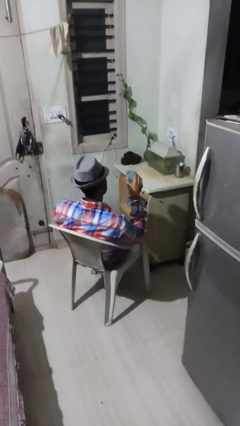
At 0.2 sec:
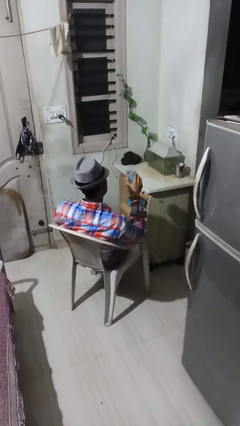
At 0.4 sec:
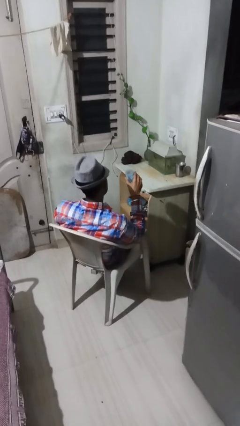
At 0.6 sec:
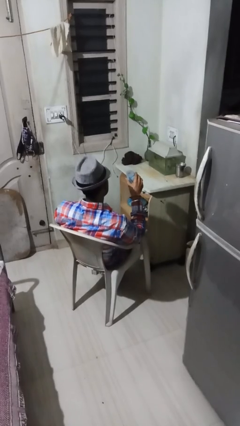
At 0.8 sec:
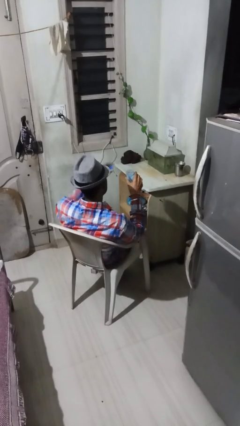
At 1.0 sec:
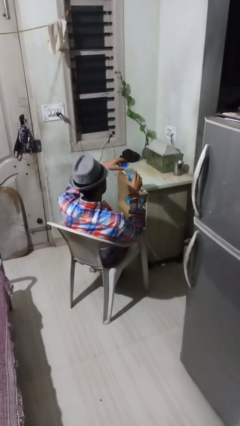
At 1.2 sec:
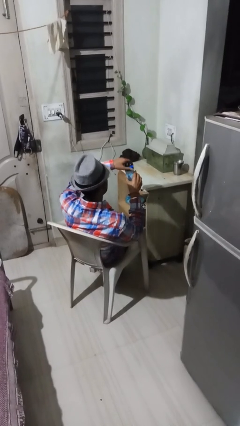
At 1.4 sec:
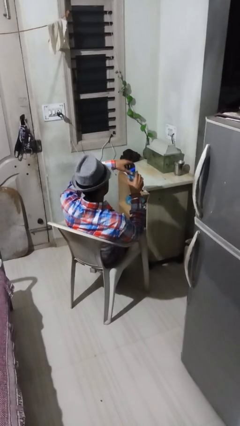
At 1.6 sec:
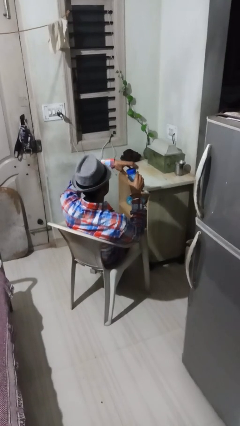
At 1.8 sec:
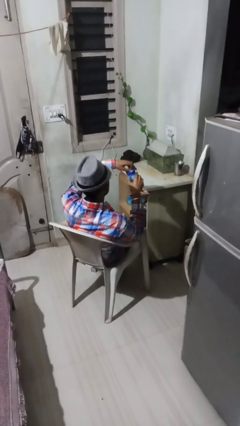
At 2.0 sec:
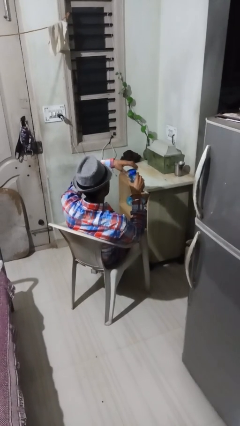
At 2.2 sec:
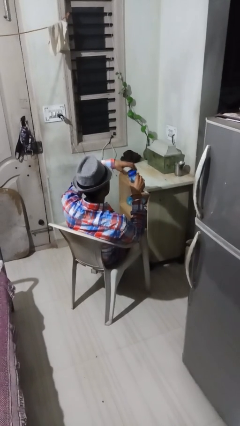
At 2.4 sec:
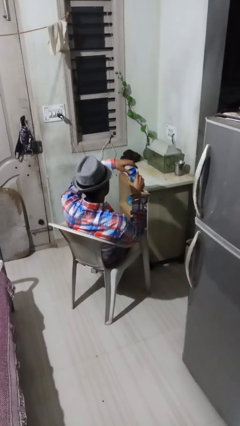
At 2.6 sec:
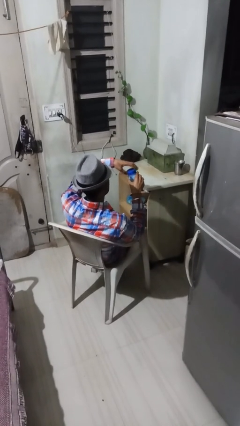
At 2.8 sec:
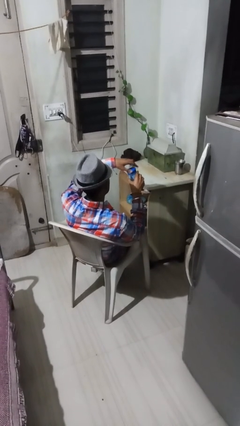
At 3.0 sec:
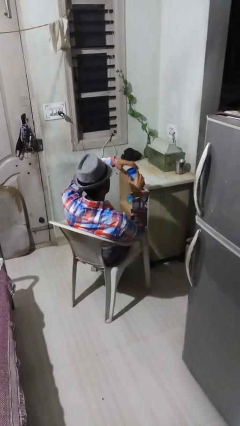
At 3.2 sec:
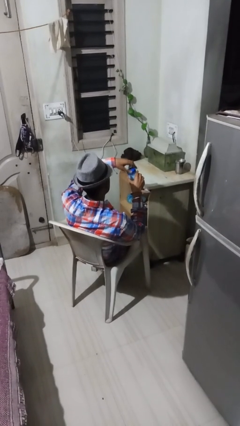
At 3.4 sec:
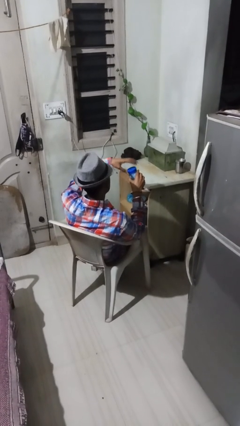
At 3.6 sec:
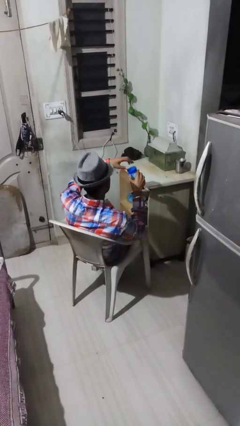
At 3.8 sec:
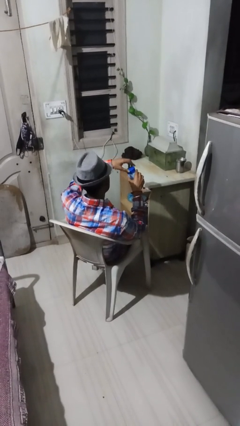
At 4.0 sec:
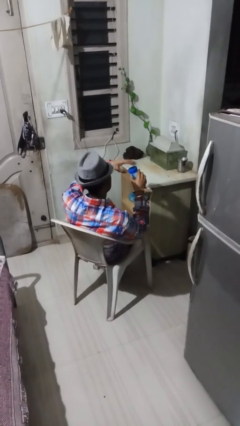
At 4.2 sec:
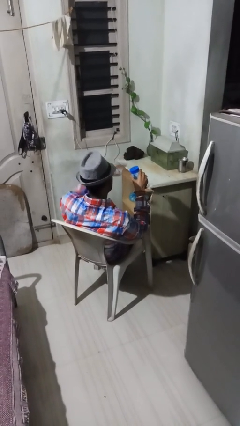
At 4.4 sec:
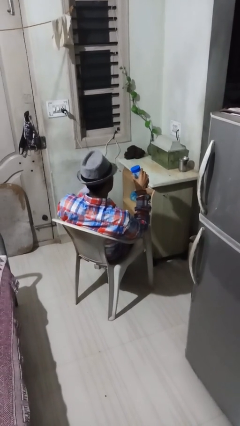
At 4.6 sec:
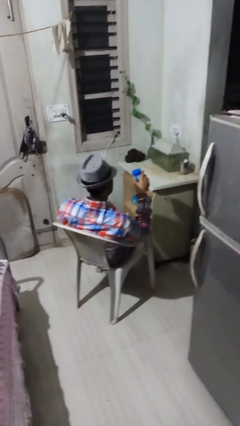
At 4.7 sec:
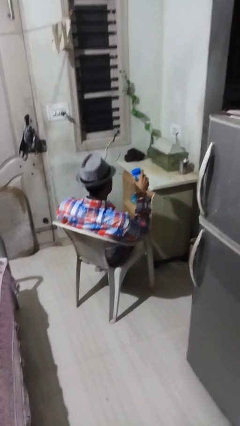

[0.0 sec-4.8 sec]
person closes jar

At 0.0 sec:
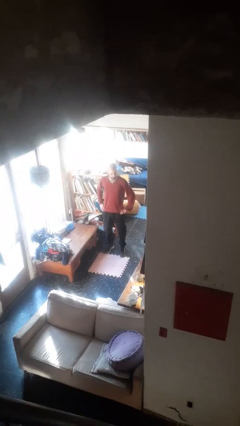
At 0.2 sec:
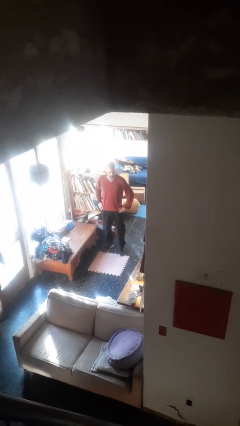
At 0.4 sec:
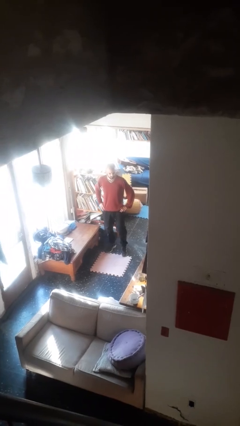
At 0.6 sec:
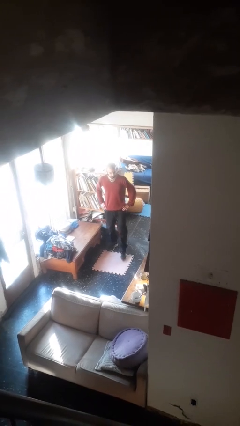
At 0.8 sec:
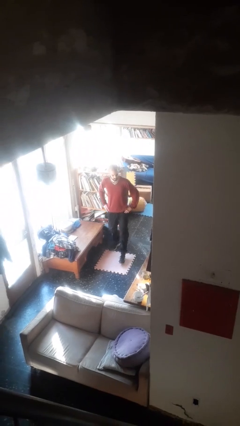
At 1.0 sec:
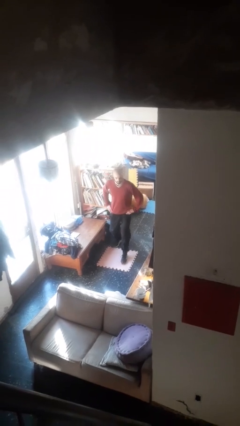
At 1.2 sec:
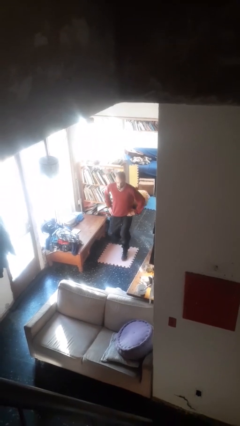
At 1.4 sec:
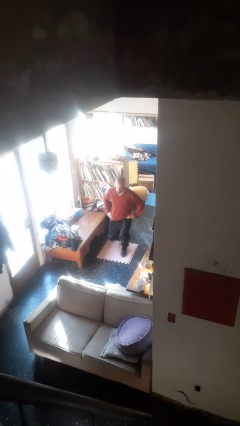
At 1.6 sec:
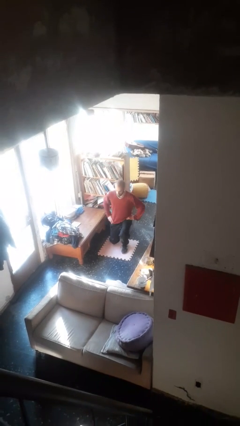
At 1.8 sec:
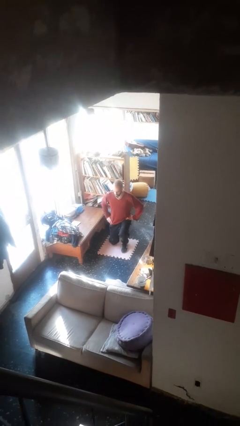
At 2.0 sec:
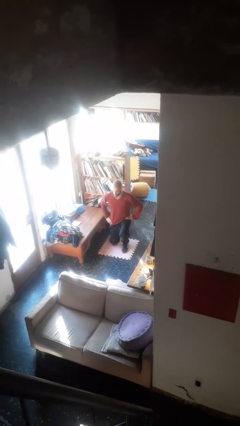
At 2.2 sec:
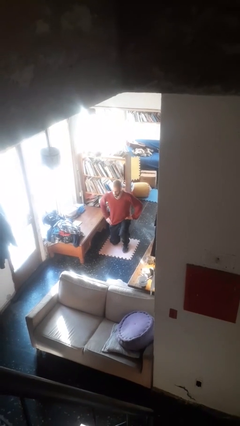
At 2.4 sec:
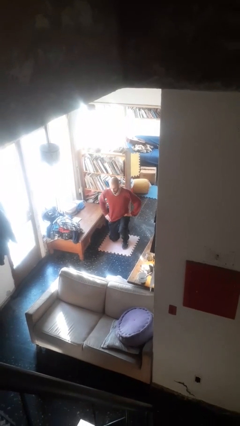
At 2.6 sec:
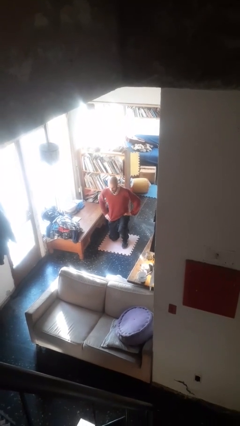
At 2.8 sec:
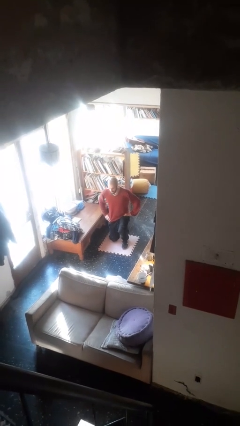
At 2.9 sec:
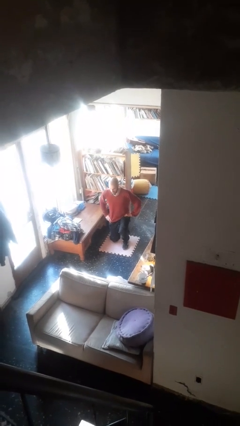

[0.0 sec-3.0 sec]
person kneels

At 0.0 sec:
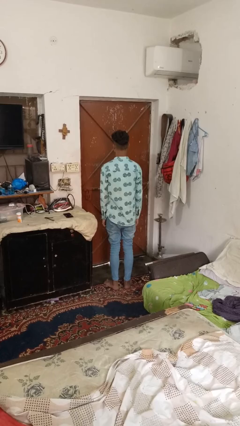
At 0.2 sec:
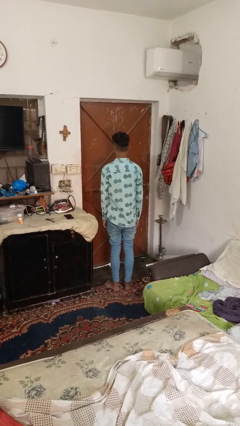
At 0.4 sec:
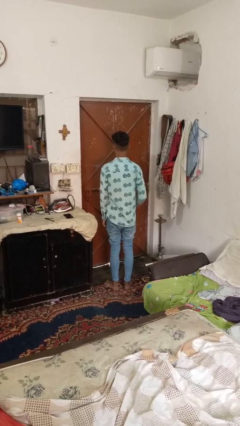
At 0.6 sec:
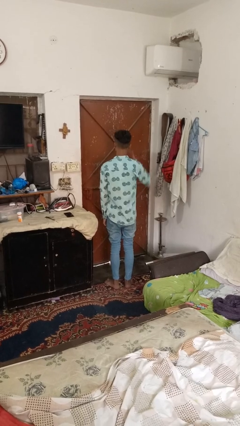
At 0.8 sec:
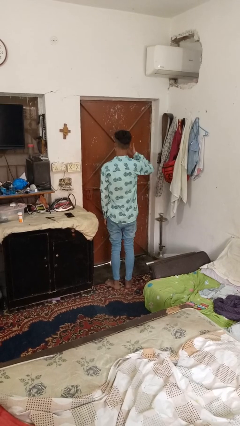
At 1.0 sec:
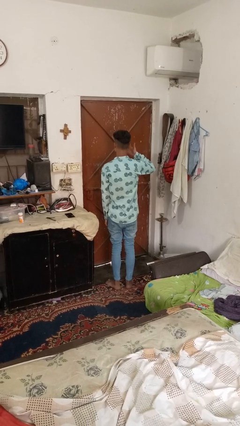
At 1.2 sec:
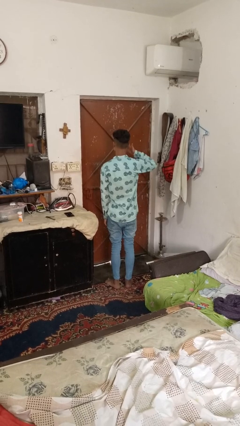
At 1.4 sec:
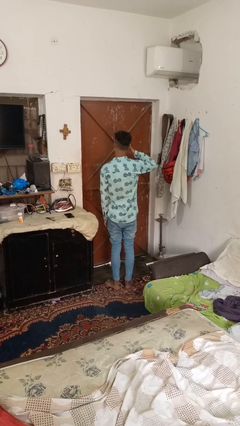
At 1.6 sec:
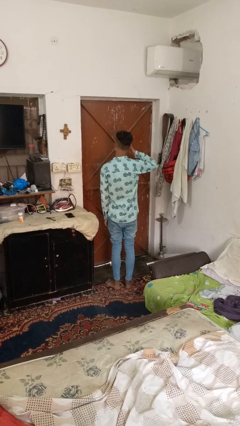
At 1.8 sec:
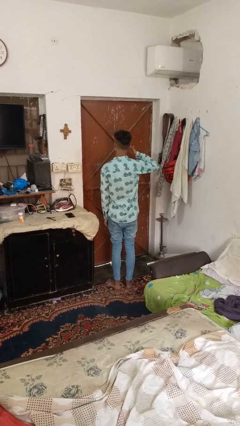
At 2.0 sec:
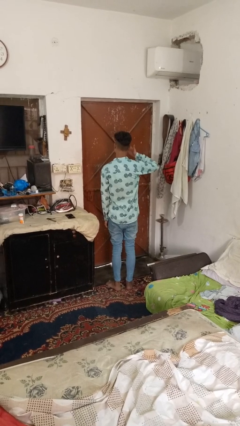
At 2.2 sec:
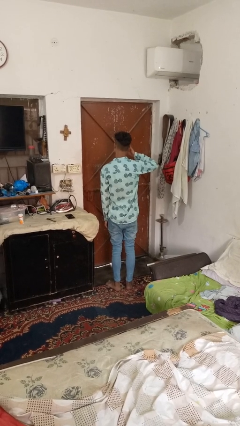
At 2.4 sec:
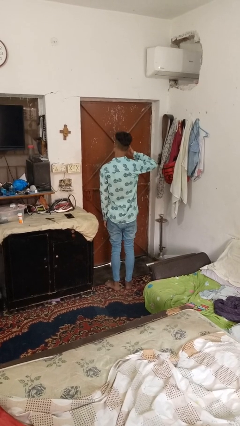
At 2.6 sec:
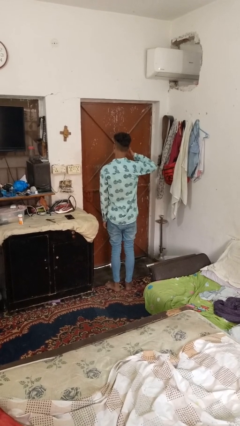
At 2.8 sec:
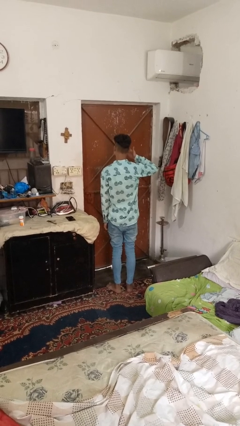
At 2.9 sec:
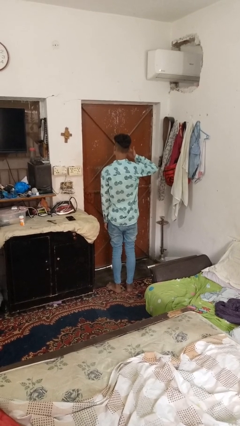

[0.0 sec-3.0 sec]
person rubs eyes

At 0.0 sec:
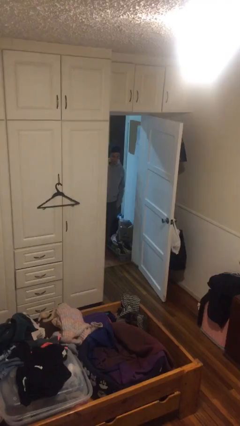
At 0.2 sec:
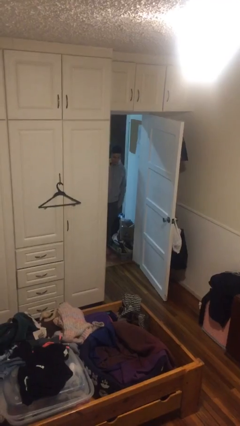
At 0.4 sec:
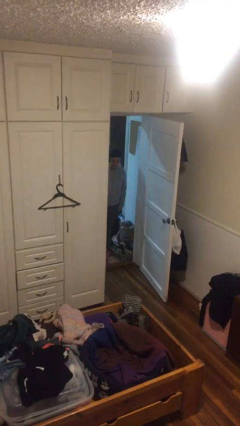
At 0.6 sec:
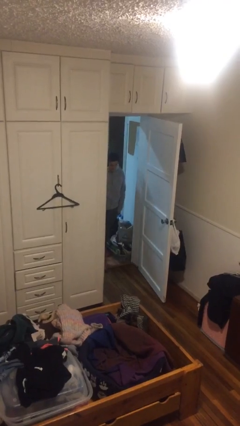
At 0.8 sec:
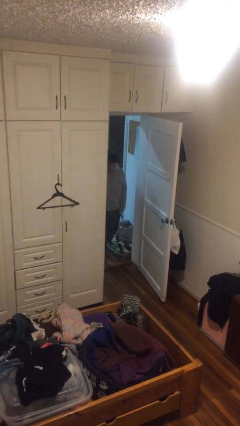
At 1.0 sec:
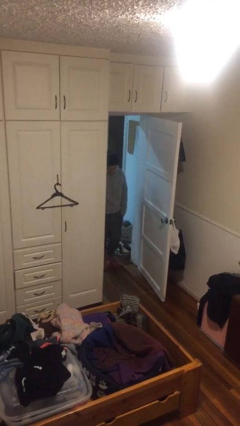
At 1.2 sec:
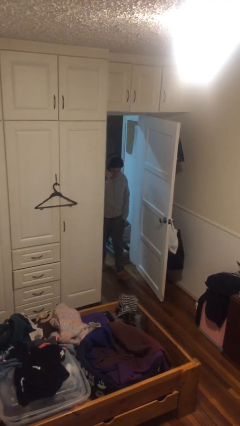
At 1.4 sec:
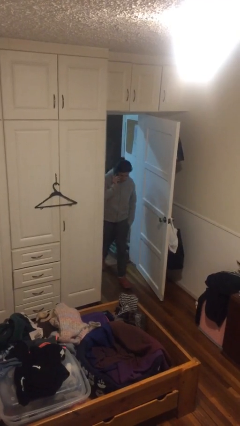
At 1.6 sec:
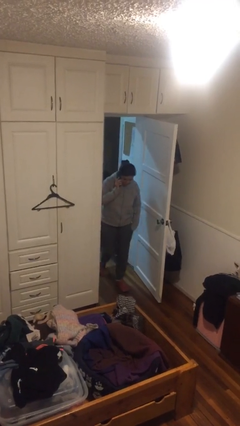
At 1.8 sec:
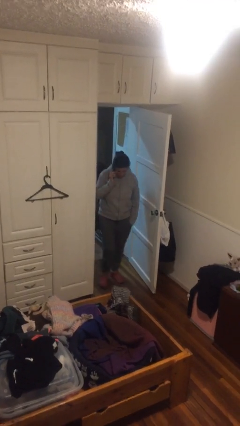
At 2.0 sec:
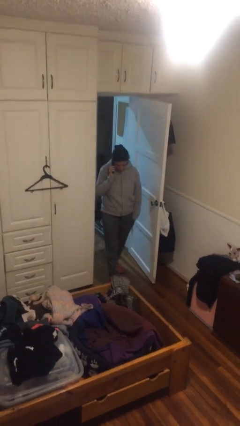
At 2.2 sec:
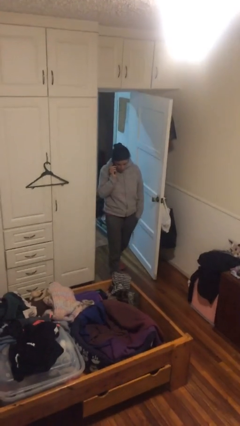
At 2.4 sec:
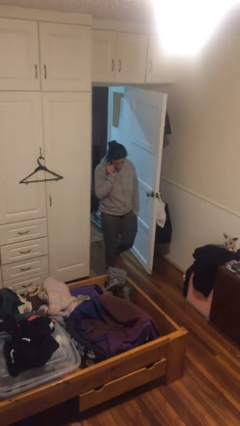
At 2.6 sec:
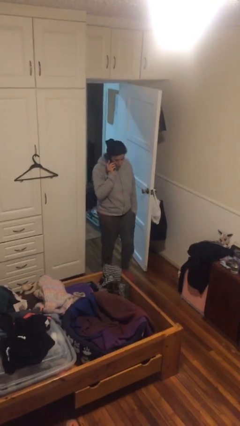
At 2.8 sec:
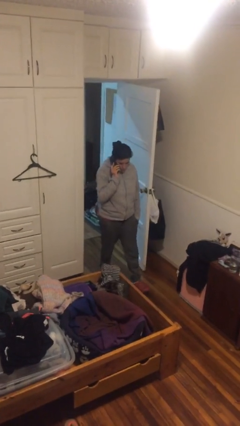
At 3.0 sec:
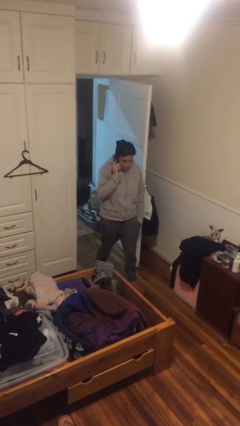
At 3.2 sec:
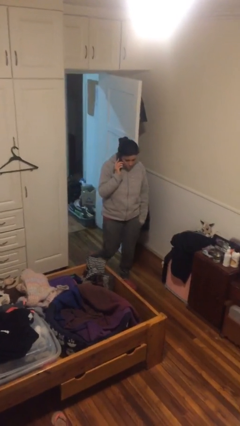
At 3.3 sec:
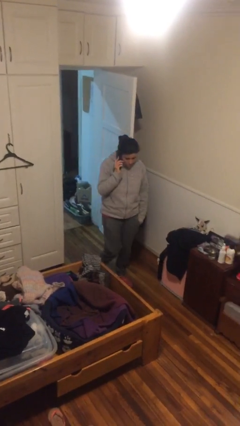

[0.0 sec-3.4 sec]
person enters scene through structure

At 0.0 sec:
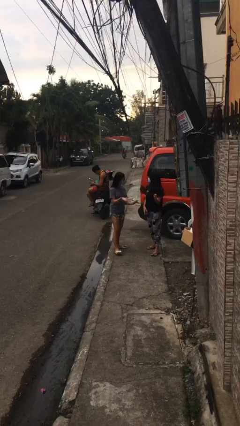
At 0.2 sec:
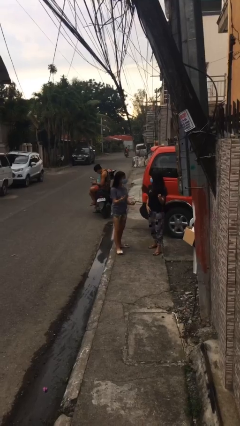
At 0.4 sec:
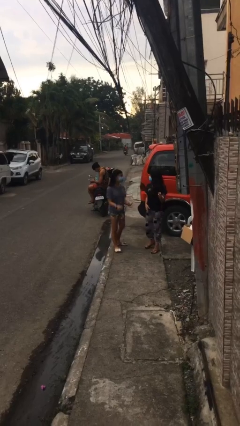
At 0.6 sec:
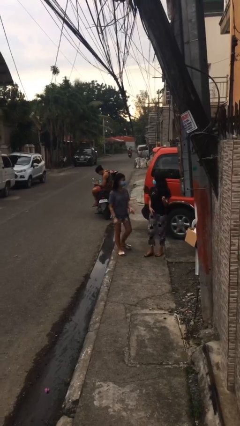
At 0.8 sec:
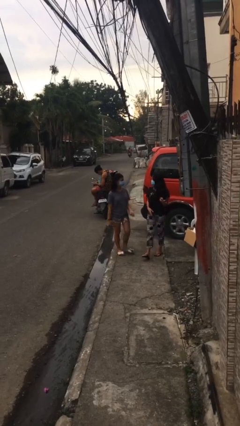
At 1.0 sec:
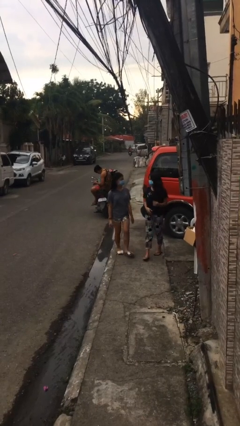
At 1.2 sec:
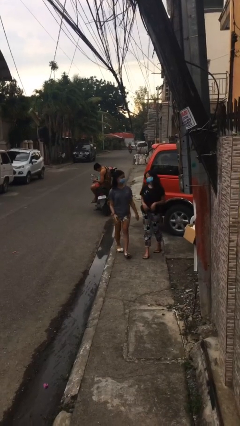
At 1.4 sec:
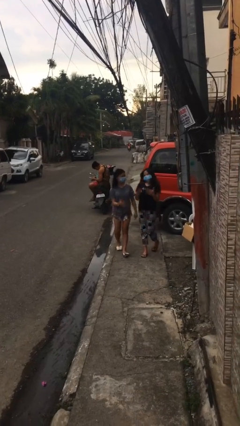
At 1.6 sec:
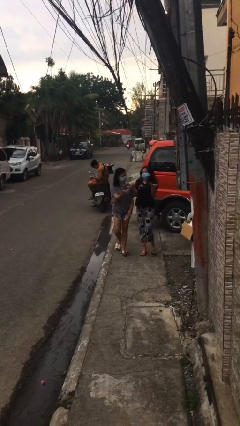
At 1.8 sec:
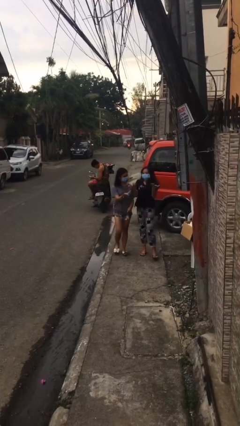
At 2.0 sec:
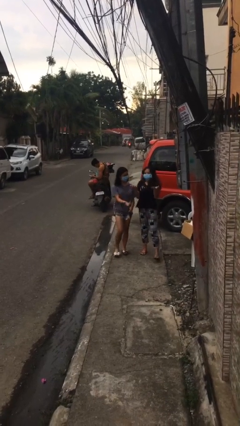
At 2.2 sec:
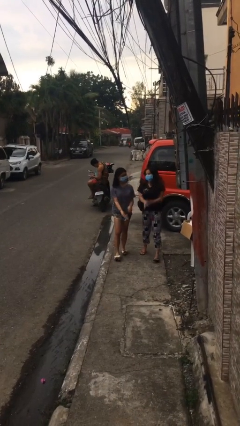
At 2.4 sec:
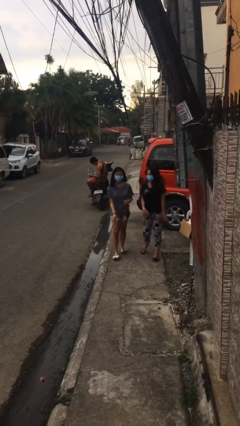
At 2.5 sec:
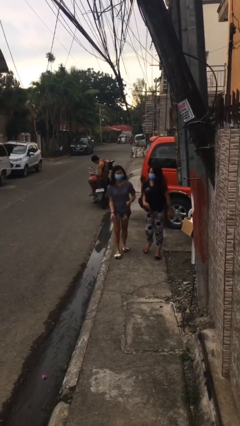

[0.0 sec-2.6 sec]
person talks to person

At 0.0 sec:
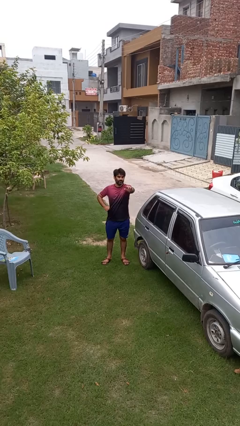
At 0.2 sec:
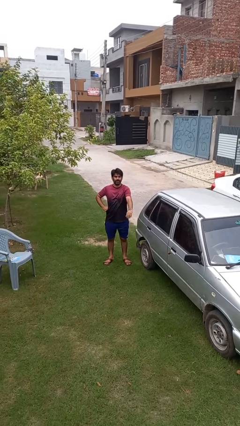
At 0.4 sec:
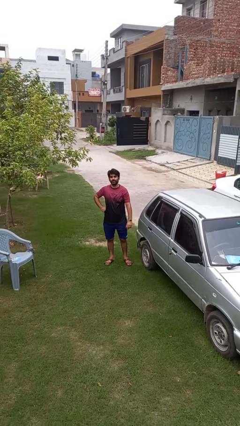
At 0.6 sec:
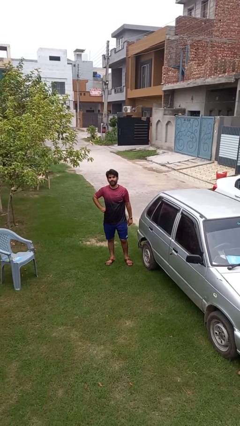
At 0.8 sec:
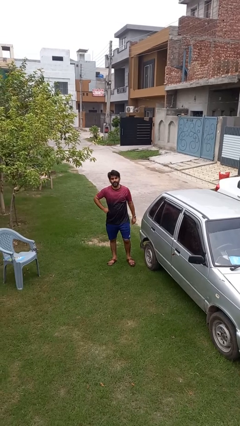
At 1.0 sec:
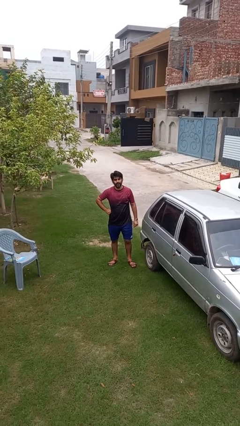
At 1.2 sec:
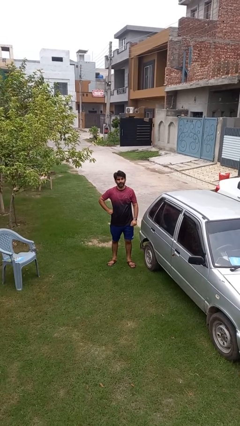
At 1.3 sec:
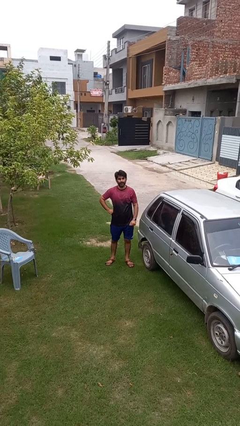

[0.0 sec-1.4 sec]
person gestures lower hand
